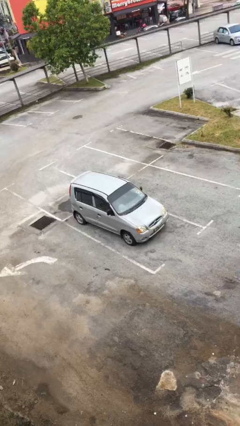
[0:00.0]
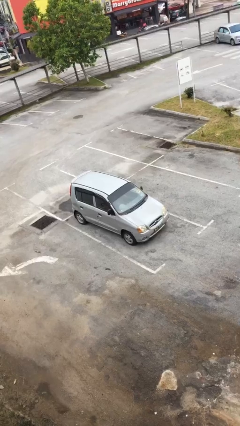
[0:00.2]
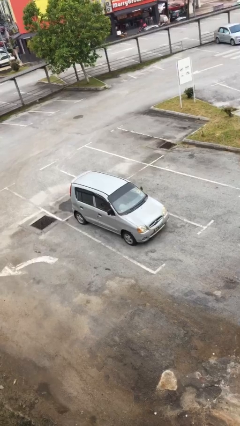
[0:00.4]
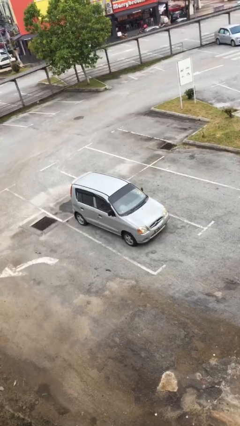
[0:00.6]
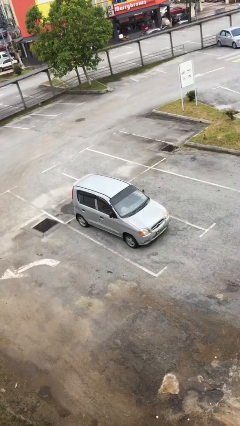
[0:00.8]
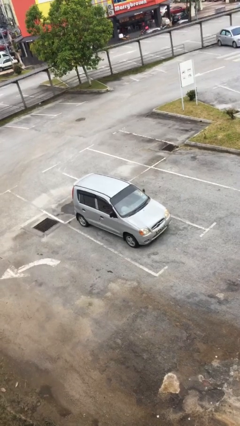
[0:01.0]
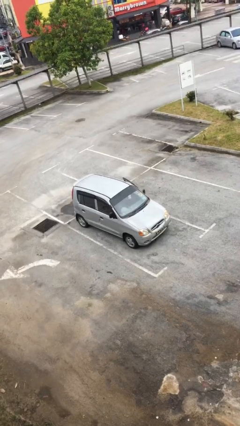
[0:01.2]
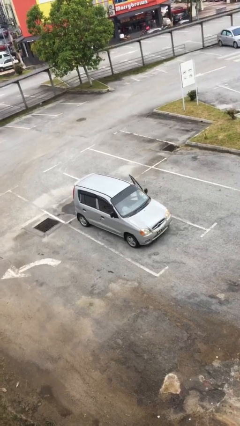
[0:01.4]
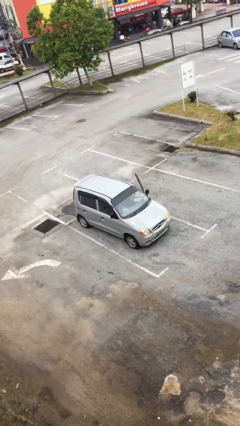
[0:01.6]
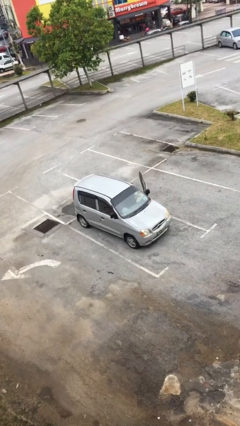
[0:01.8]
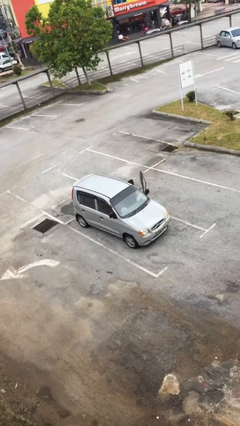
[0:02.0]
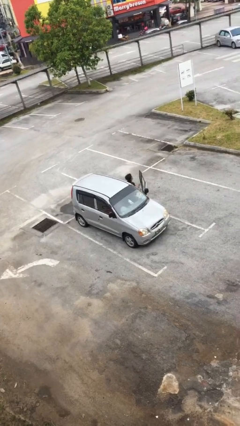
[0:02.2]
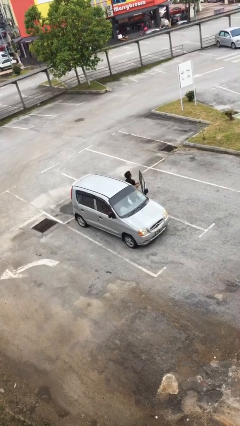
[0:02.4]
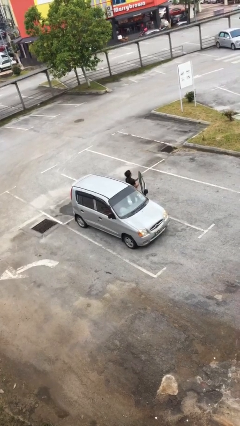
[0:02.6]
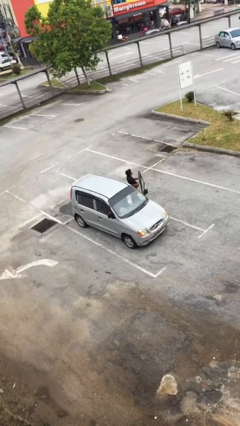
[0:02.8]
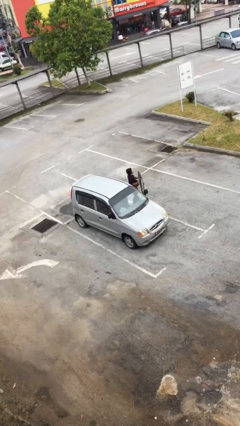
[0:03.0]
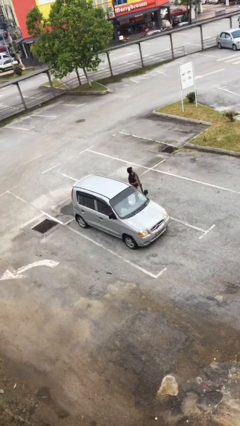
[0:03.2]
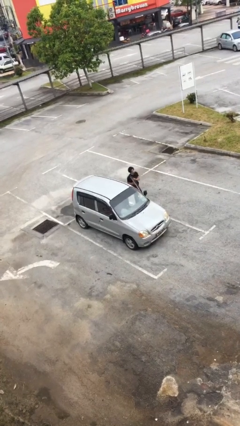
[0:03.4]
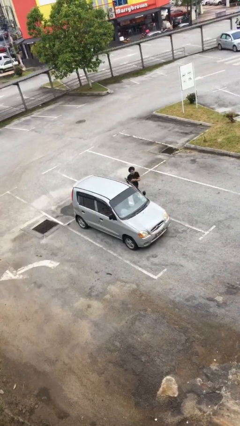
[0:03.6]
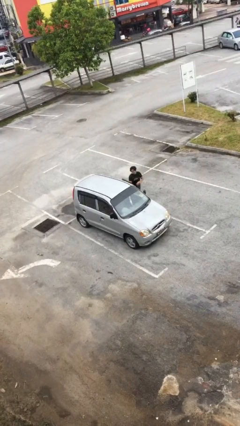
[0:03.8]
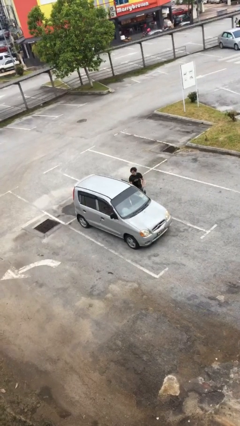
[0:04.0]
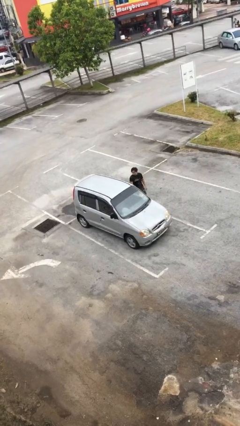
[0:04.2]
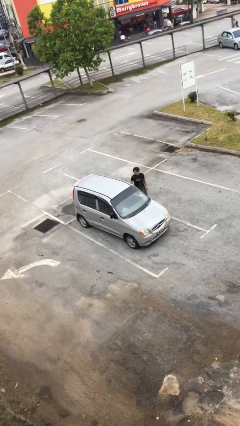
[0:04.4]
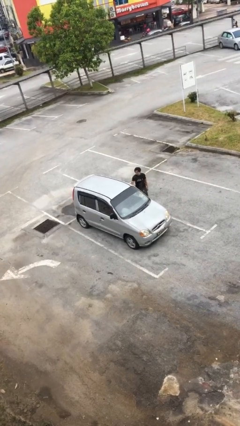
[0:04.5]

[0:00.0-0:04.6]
car drops off person

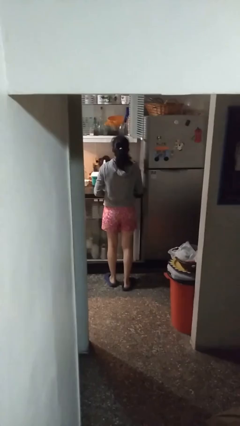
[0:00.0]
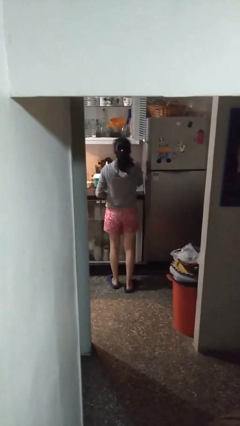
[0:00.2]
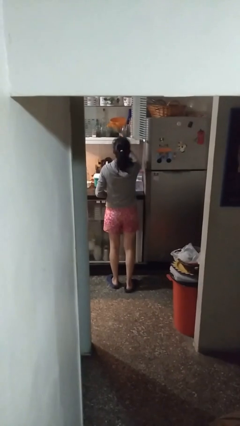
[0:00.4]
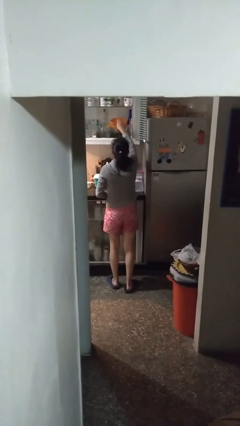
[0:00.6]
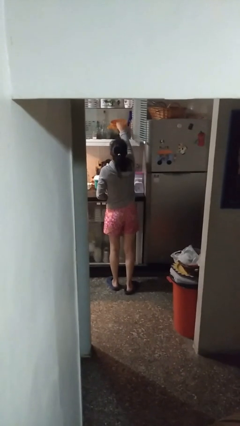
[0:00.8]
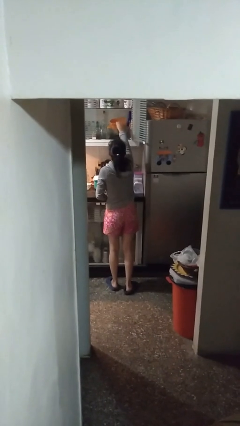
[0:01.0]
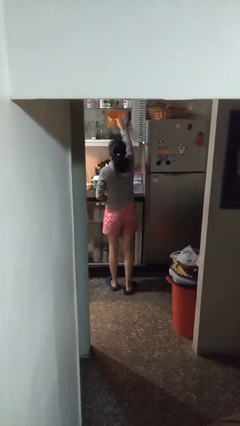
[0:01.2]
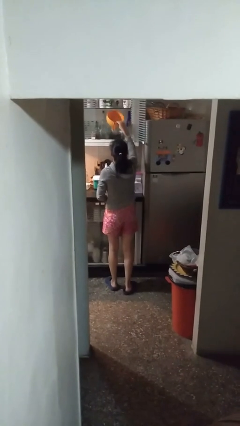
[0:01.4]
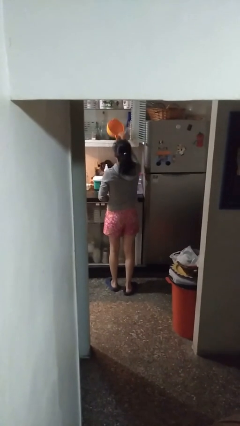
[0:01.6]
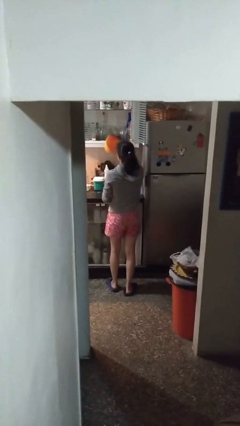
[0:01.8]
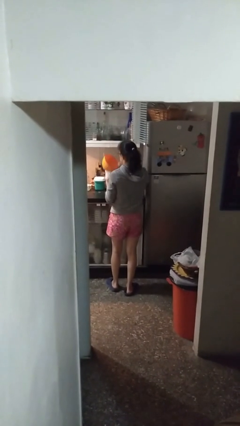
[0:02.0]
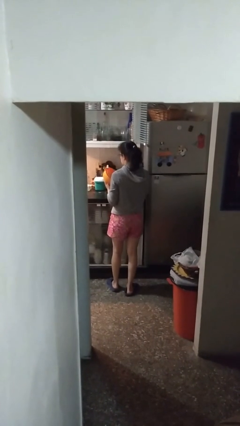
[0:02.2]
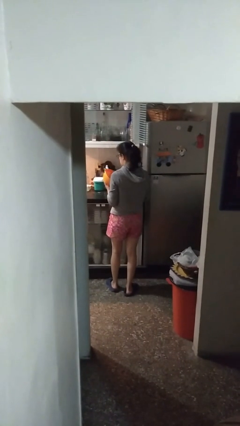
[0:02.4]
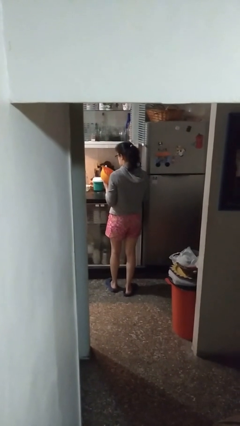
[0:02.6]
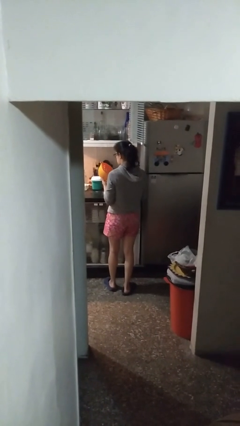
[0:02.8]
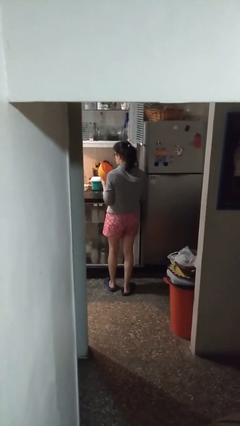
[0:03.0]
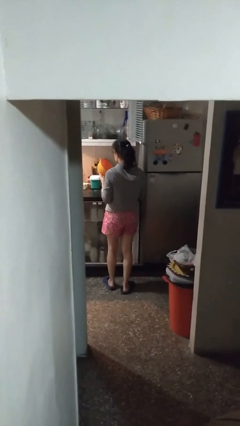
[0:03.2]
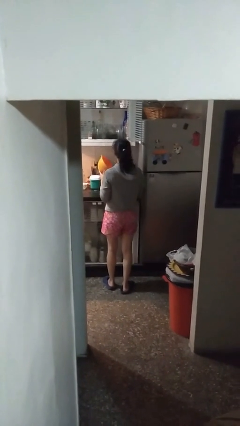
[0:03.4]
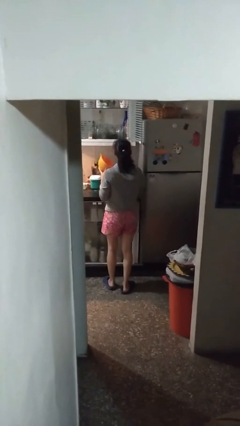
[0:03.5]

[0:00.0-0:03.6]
person picks up object from cabinet

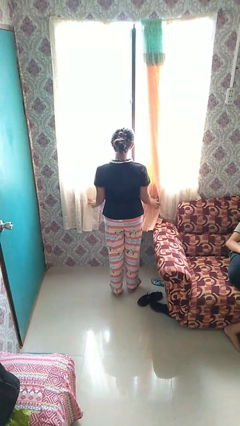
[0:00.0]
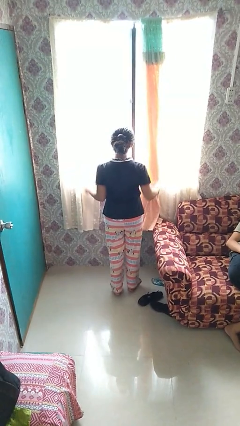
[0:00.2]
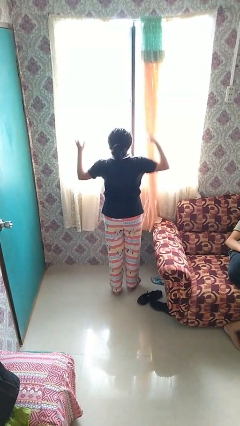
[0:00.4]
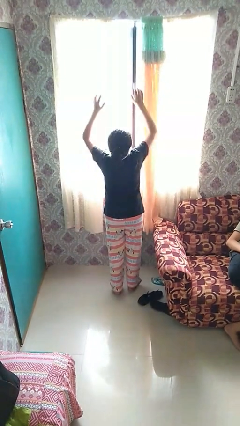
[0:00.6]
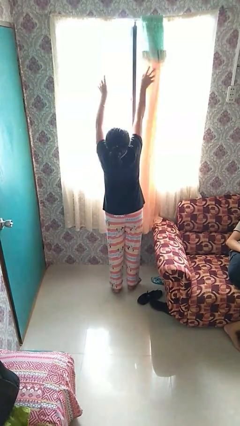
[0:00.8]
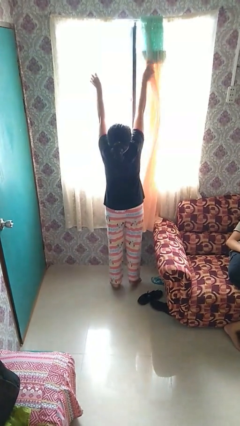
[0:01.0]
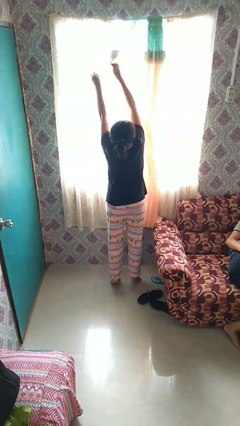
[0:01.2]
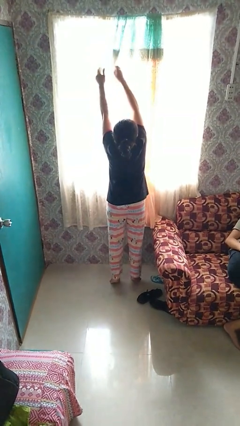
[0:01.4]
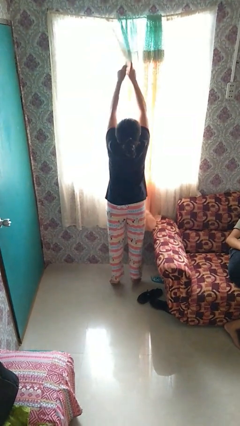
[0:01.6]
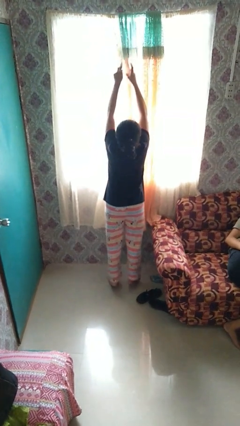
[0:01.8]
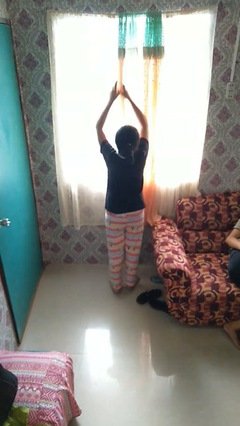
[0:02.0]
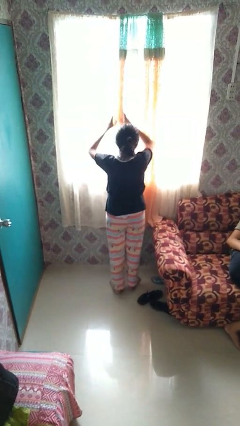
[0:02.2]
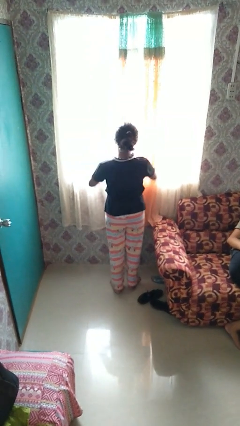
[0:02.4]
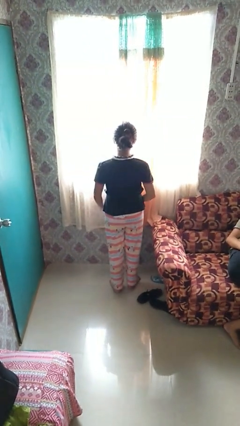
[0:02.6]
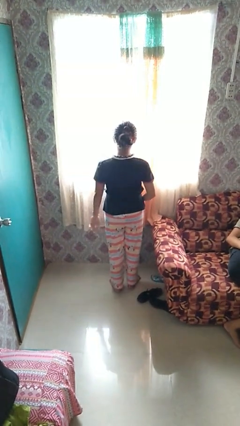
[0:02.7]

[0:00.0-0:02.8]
person closes curtains

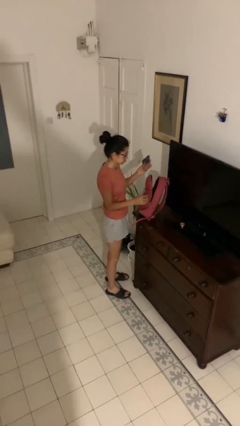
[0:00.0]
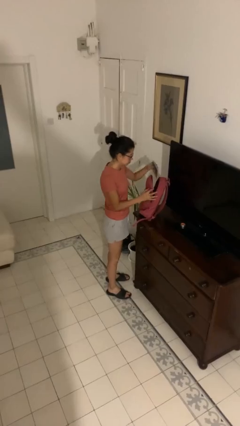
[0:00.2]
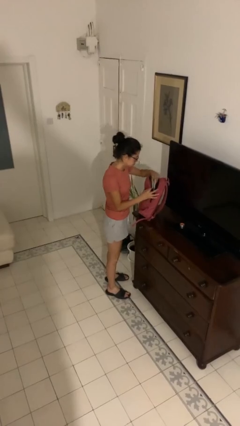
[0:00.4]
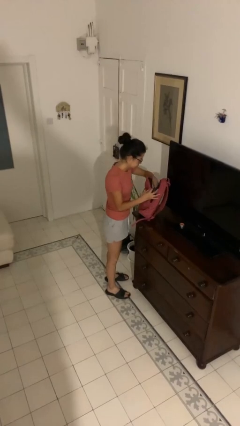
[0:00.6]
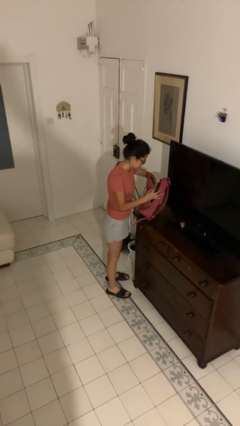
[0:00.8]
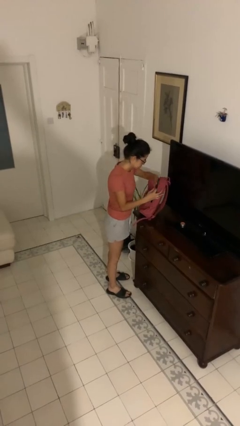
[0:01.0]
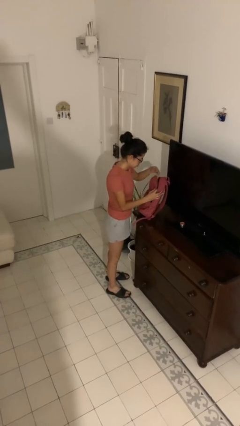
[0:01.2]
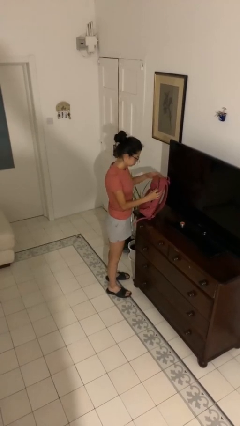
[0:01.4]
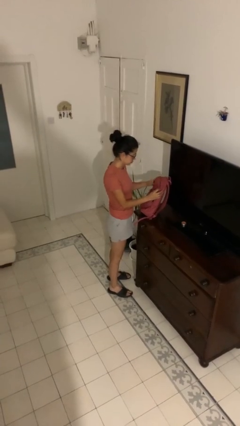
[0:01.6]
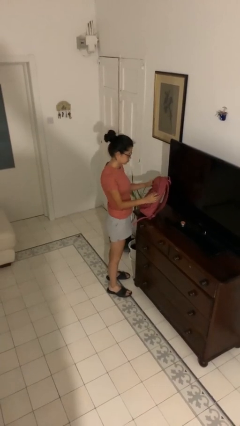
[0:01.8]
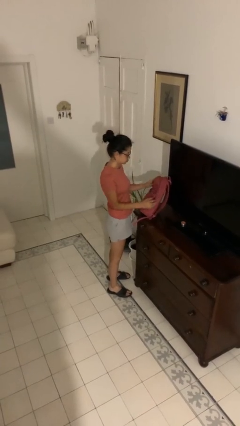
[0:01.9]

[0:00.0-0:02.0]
person puts object into backpack

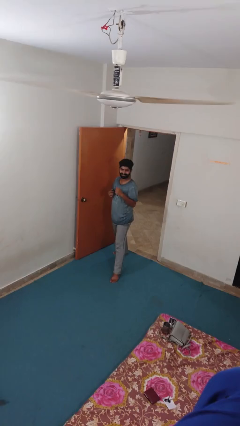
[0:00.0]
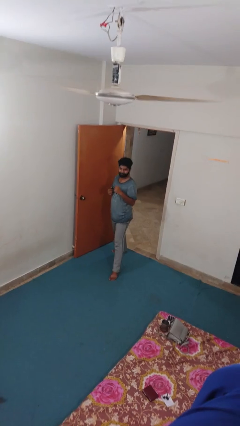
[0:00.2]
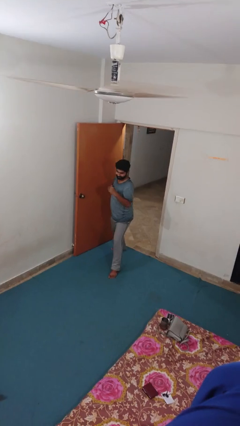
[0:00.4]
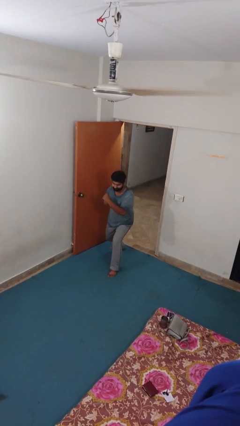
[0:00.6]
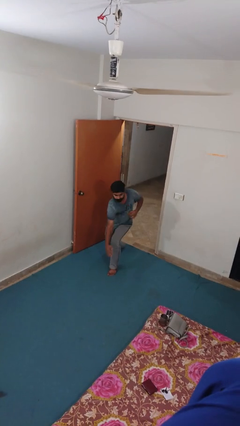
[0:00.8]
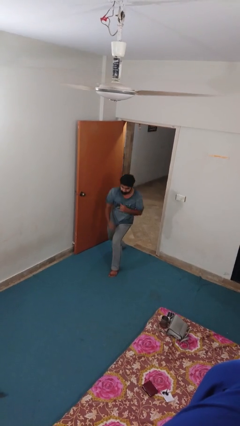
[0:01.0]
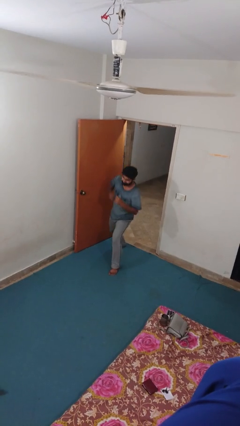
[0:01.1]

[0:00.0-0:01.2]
person karate chop

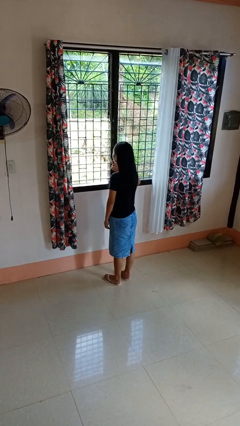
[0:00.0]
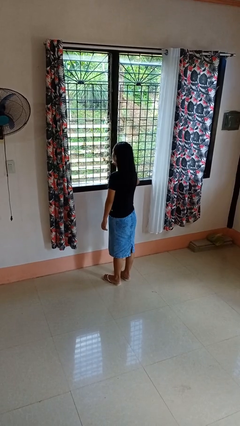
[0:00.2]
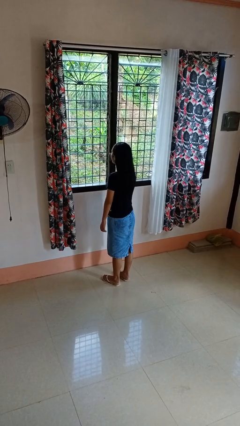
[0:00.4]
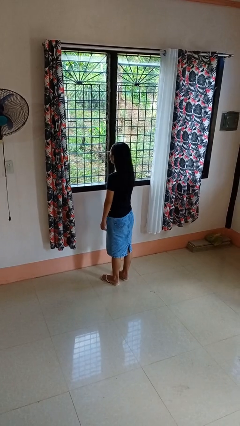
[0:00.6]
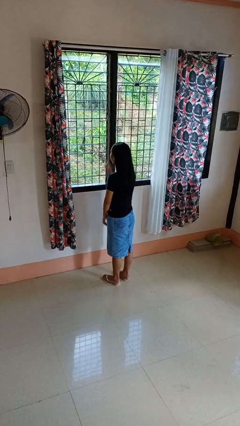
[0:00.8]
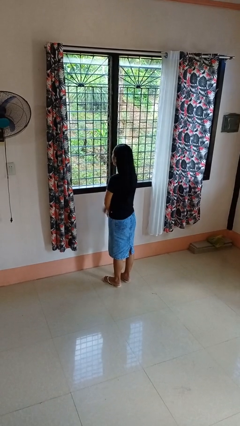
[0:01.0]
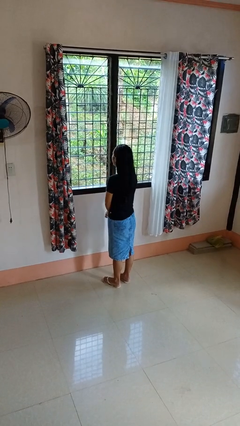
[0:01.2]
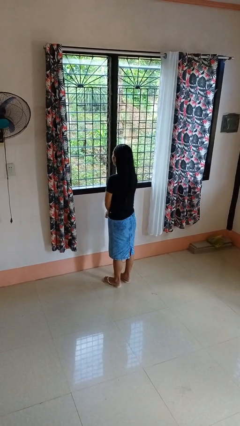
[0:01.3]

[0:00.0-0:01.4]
person closes home window

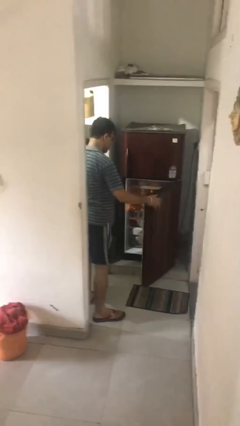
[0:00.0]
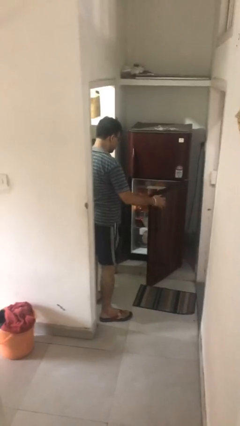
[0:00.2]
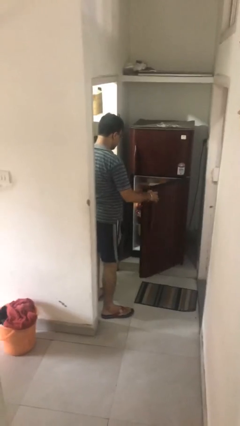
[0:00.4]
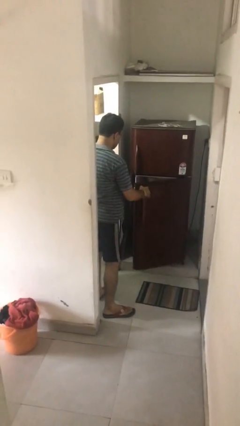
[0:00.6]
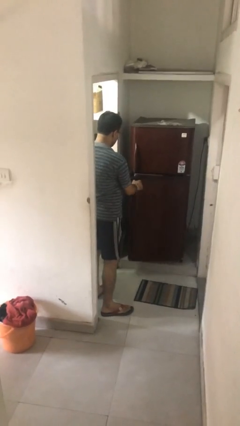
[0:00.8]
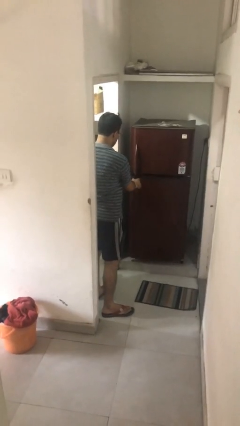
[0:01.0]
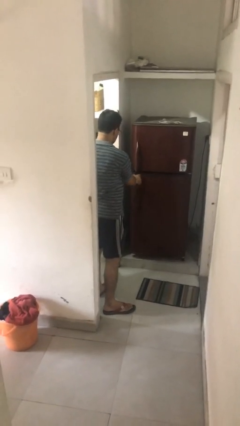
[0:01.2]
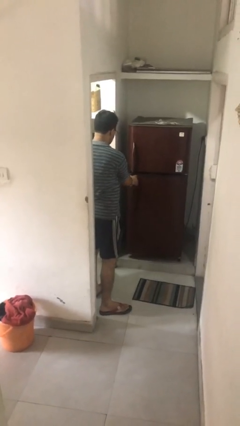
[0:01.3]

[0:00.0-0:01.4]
person closes refrigerator
